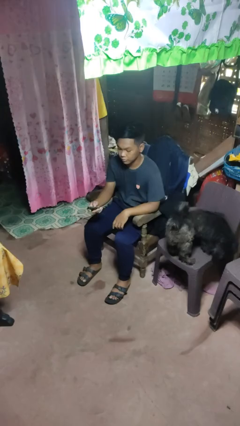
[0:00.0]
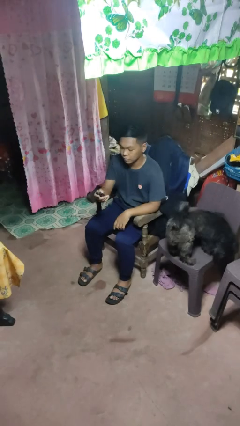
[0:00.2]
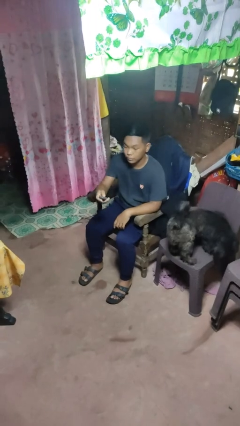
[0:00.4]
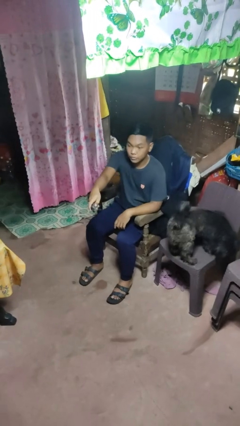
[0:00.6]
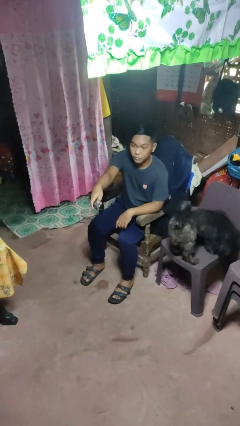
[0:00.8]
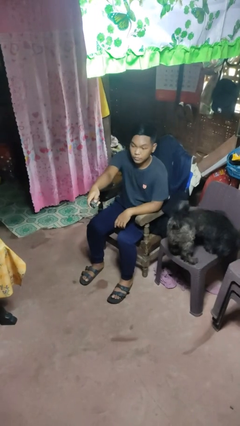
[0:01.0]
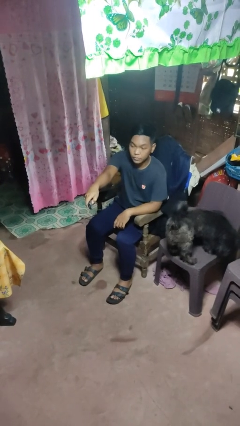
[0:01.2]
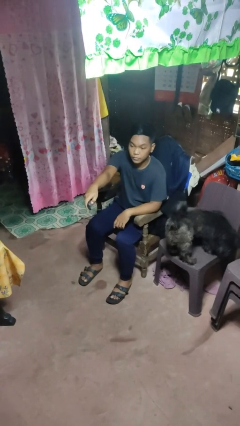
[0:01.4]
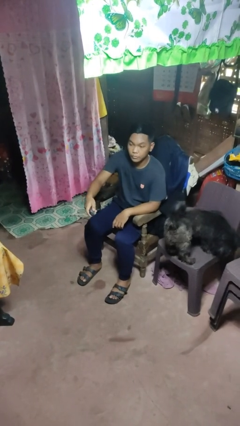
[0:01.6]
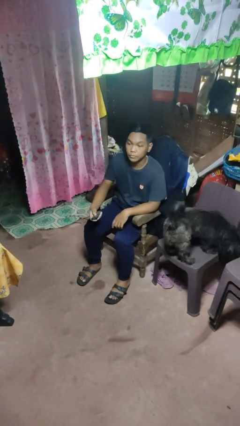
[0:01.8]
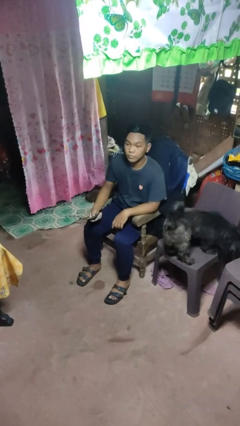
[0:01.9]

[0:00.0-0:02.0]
person uses television remote

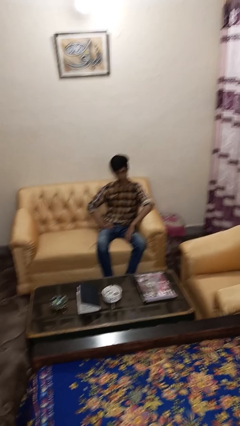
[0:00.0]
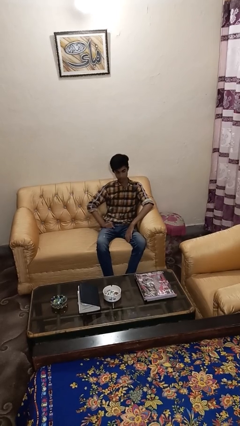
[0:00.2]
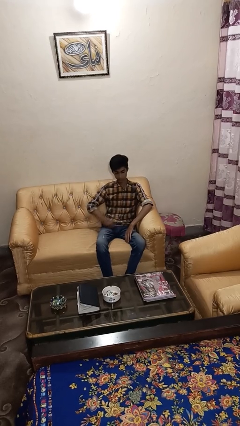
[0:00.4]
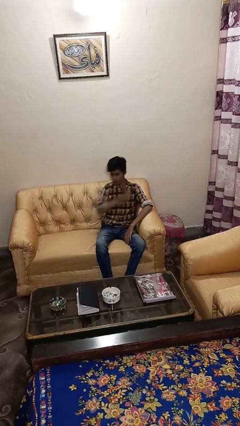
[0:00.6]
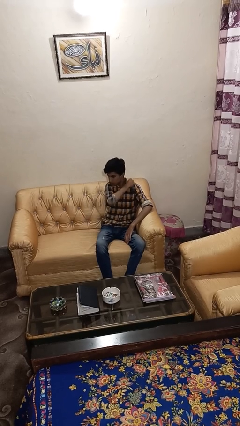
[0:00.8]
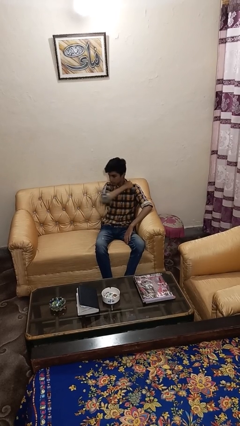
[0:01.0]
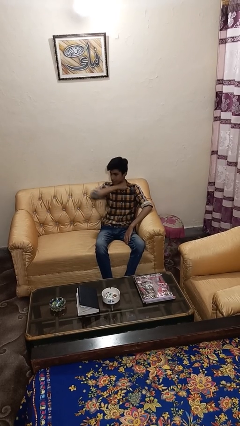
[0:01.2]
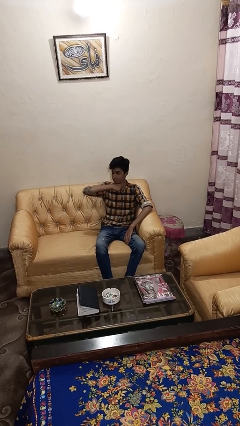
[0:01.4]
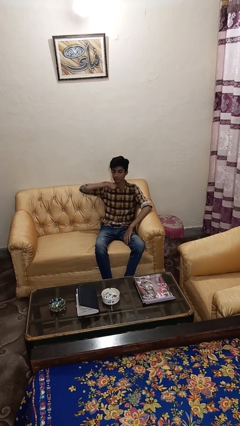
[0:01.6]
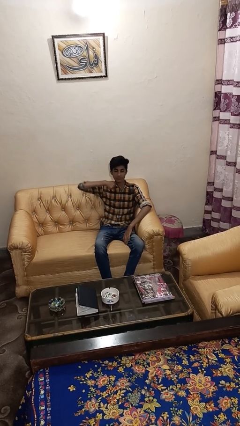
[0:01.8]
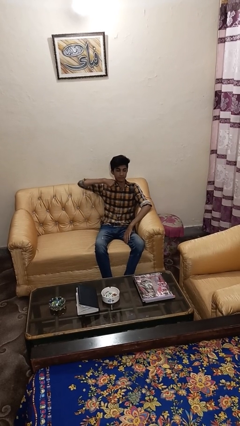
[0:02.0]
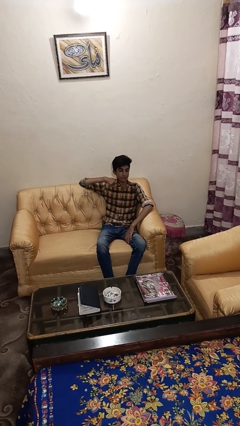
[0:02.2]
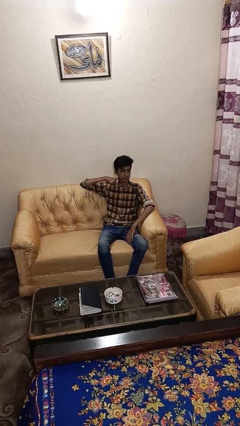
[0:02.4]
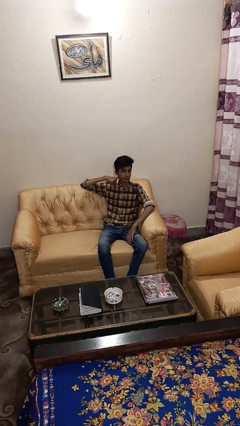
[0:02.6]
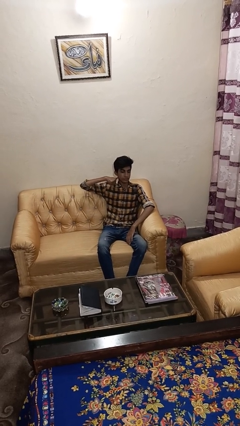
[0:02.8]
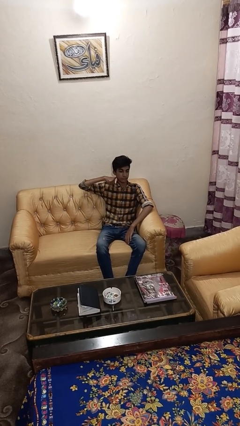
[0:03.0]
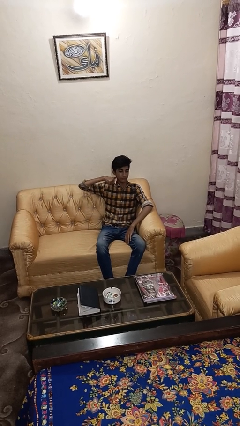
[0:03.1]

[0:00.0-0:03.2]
person gestures cut

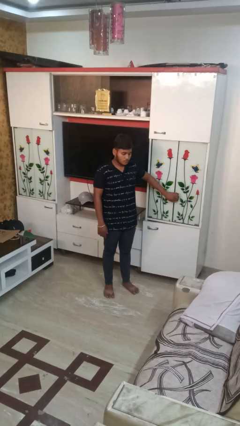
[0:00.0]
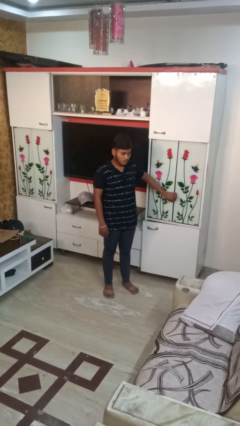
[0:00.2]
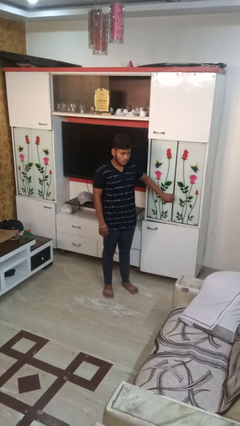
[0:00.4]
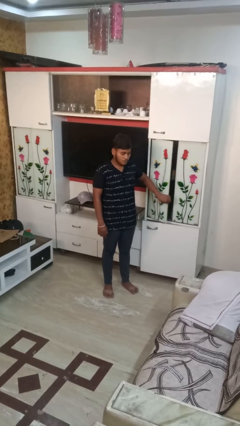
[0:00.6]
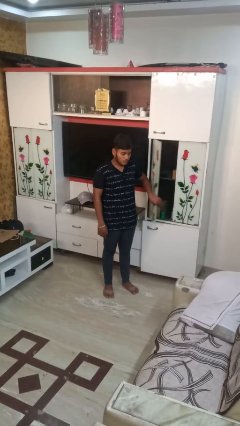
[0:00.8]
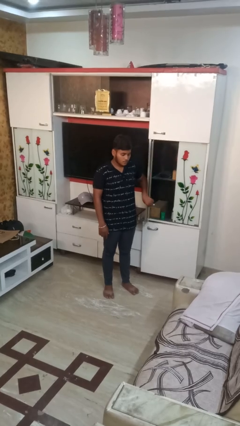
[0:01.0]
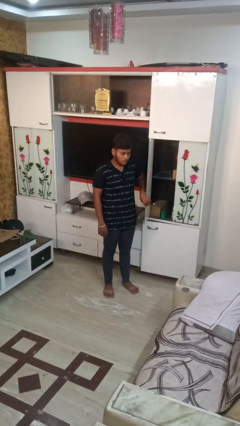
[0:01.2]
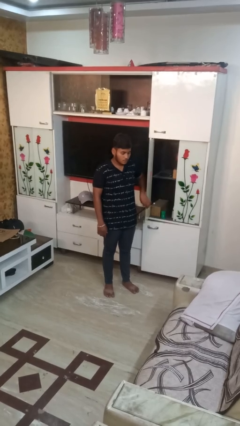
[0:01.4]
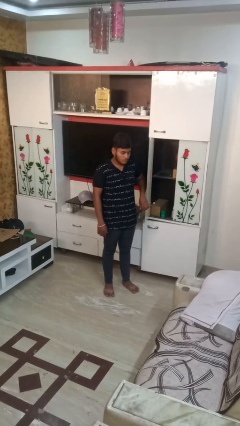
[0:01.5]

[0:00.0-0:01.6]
person opens closet door

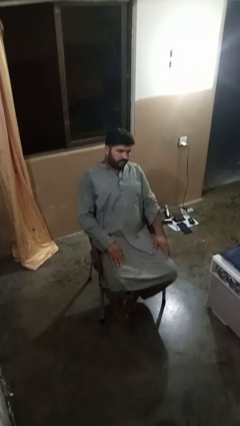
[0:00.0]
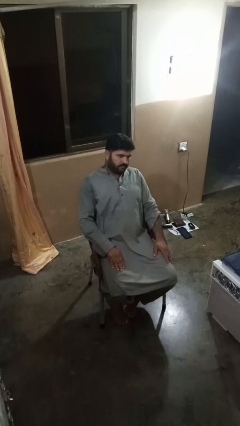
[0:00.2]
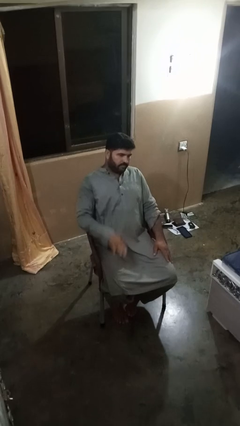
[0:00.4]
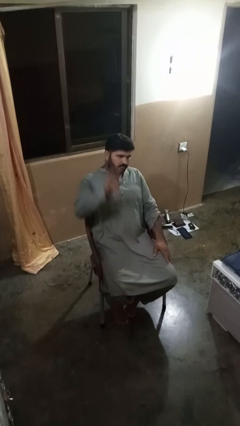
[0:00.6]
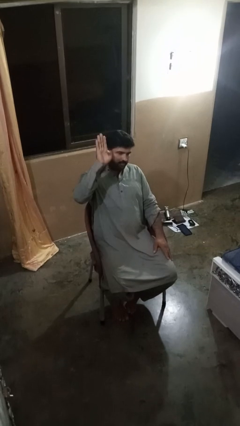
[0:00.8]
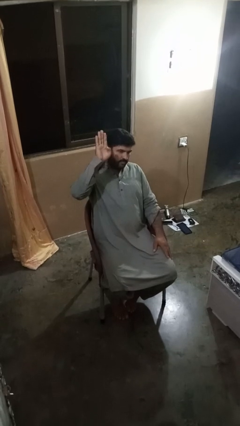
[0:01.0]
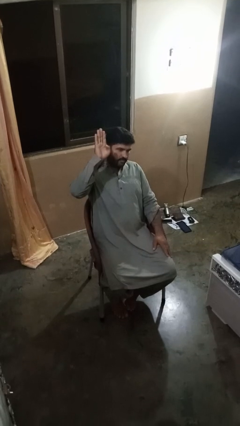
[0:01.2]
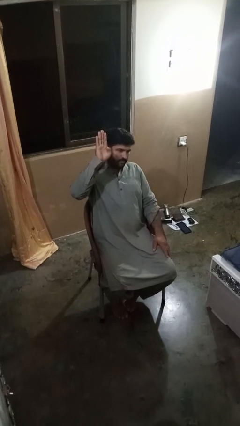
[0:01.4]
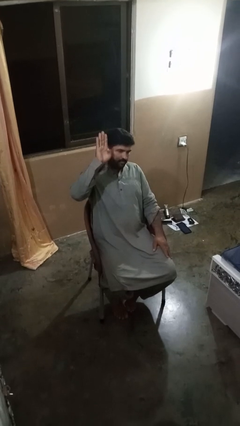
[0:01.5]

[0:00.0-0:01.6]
person gestures number four

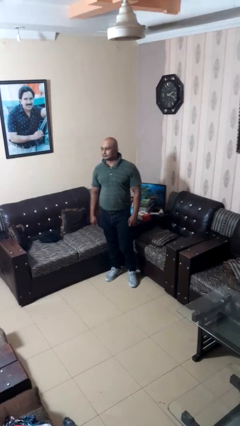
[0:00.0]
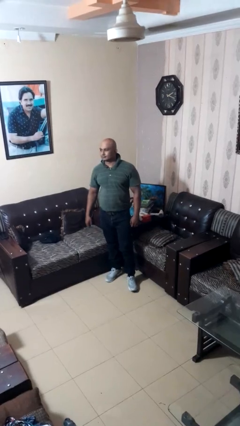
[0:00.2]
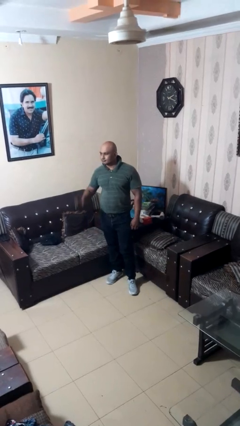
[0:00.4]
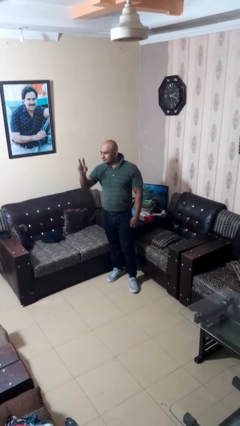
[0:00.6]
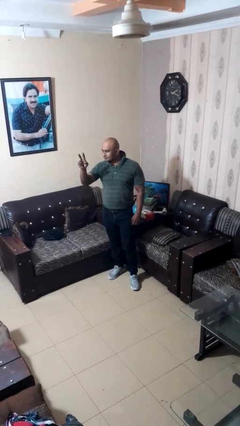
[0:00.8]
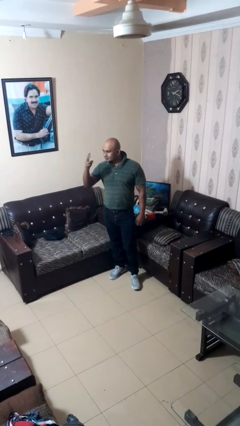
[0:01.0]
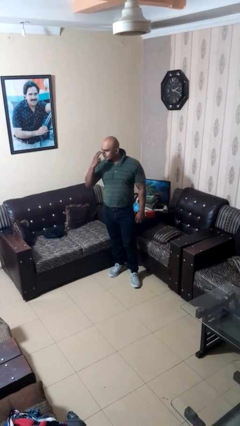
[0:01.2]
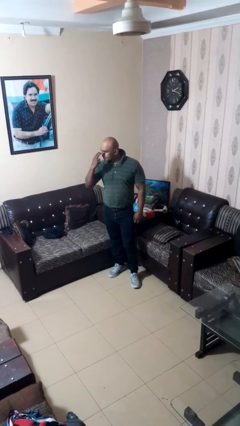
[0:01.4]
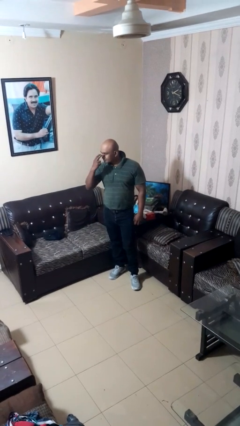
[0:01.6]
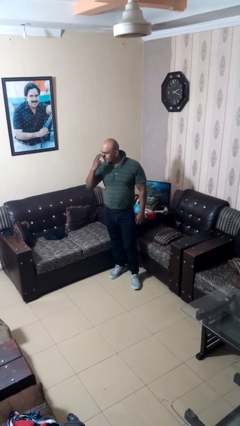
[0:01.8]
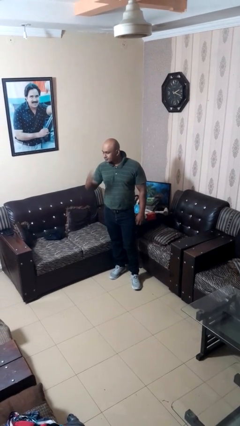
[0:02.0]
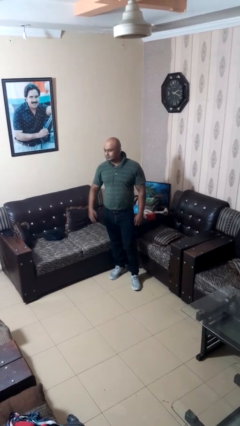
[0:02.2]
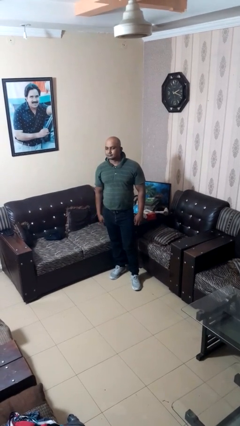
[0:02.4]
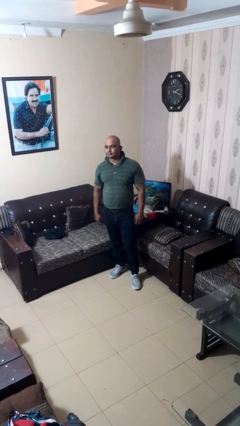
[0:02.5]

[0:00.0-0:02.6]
person gestures watch closely

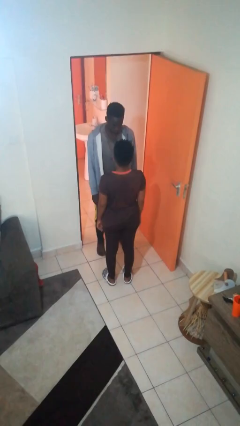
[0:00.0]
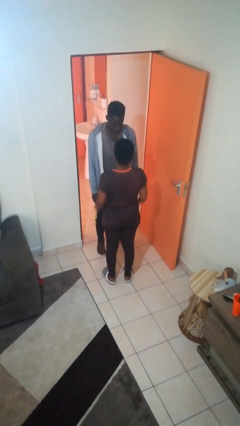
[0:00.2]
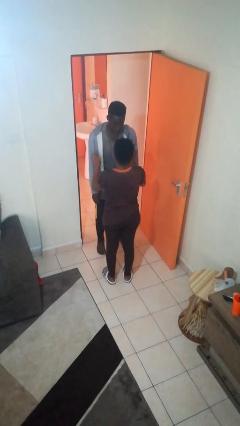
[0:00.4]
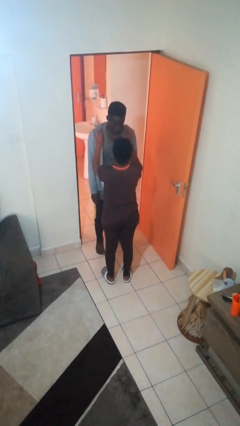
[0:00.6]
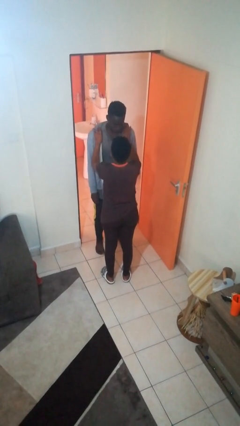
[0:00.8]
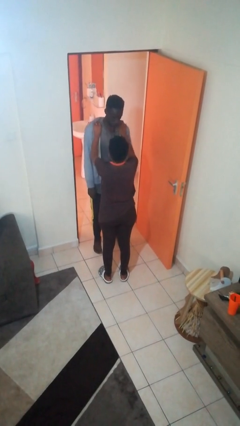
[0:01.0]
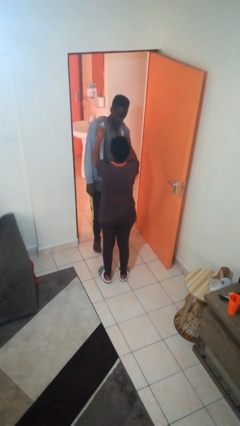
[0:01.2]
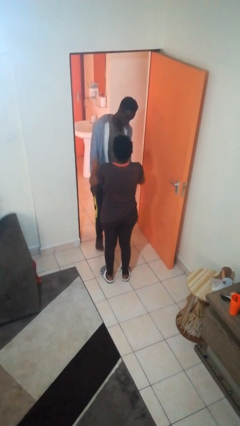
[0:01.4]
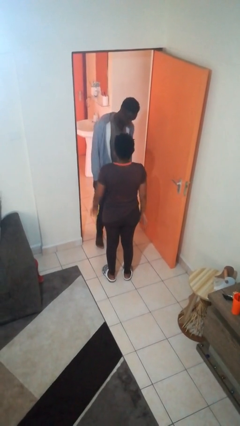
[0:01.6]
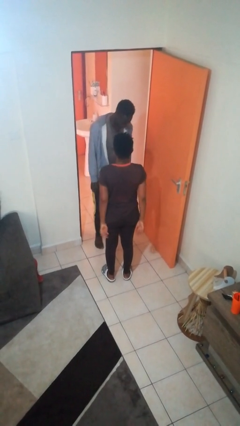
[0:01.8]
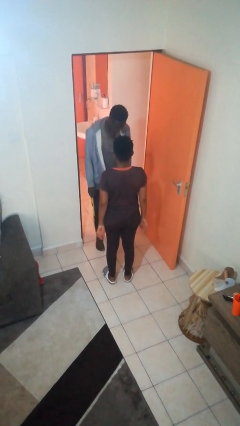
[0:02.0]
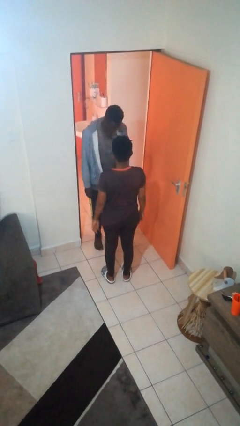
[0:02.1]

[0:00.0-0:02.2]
person shoves person

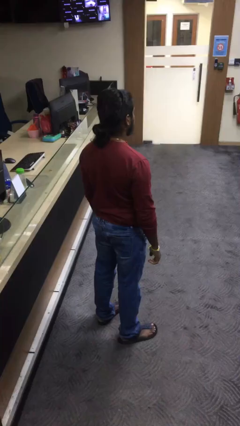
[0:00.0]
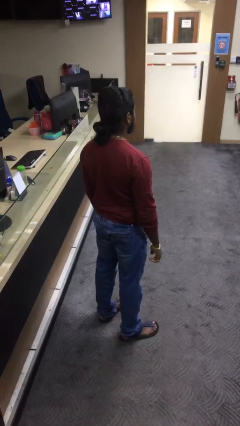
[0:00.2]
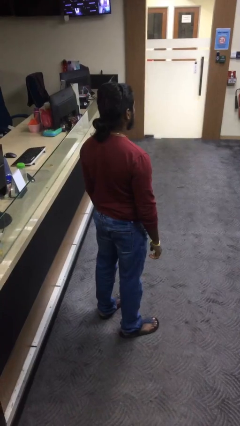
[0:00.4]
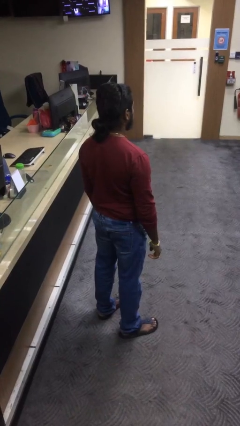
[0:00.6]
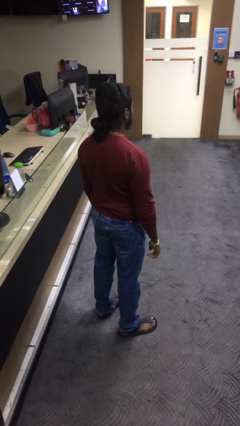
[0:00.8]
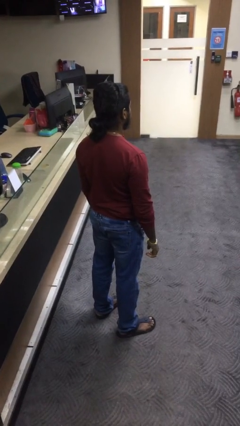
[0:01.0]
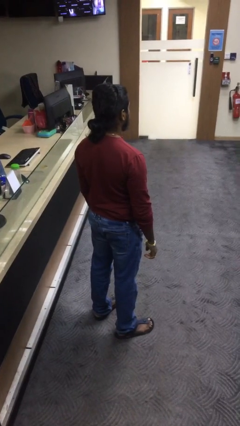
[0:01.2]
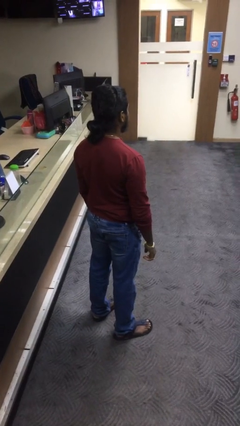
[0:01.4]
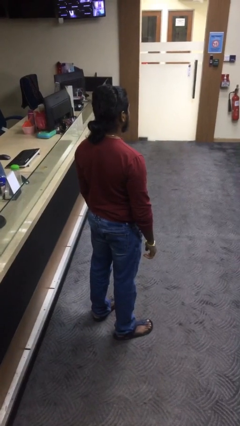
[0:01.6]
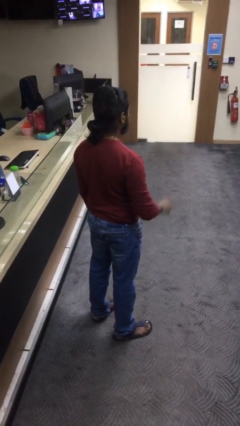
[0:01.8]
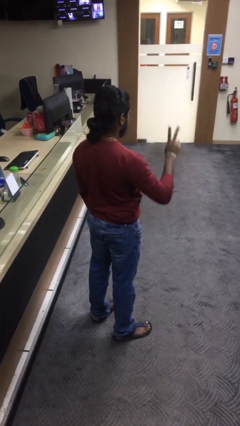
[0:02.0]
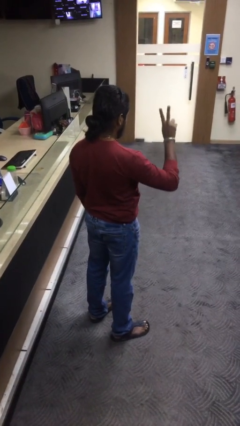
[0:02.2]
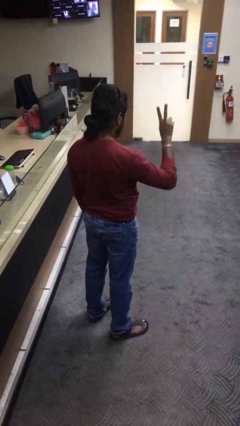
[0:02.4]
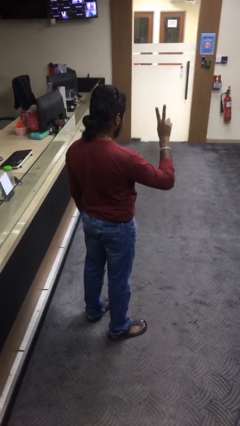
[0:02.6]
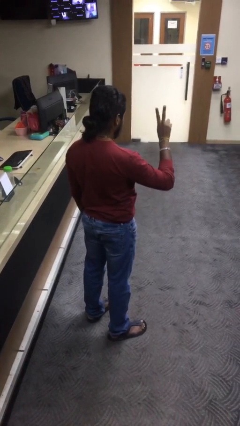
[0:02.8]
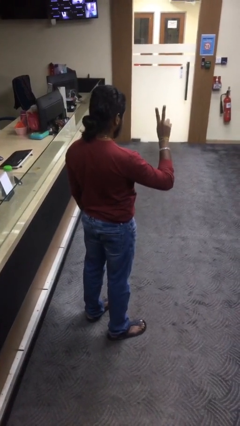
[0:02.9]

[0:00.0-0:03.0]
person gestures peace

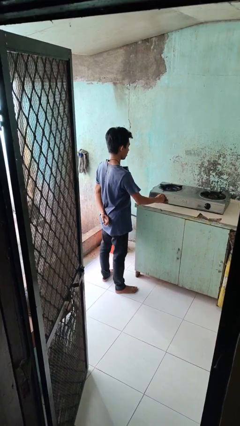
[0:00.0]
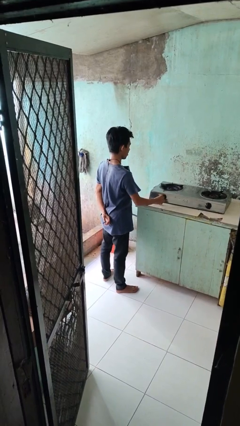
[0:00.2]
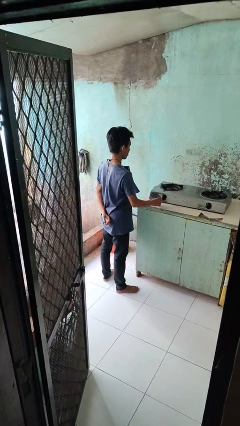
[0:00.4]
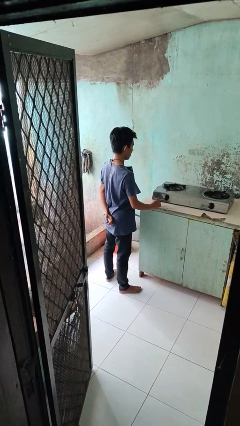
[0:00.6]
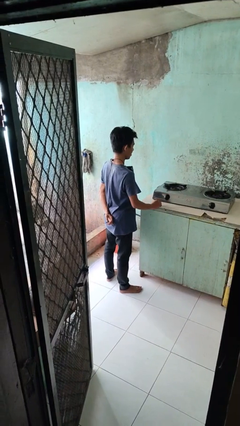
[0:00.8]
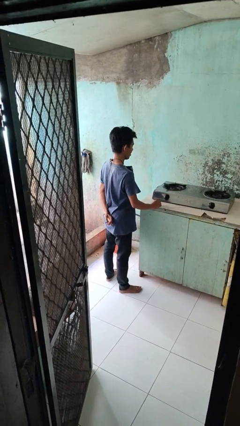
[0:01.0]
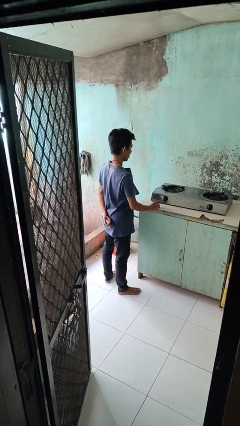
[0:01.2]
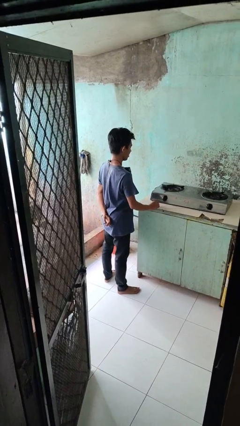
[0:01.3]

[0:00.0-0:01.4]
person turns off stovetop
